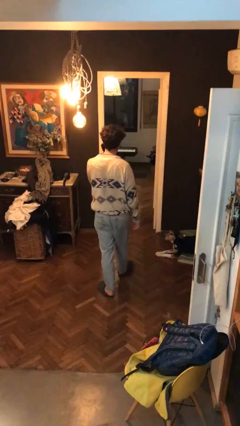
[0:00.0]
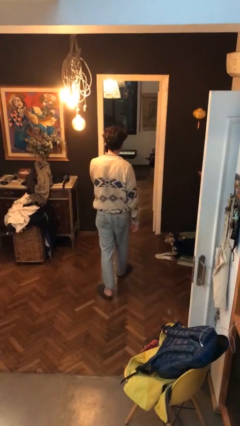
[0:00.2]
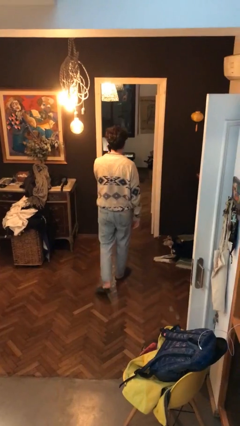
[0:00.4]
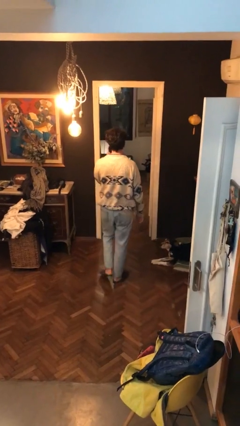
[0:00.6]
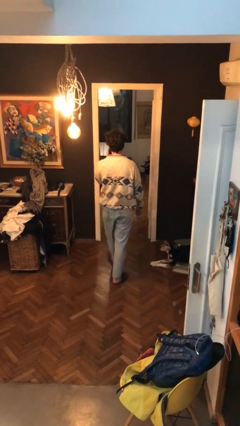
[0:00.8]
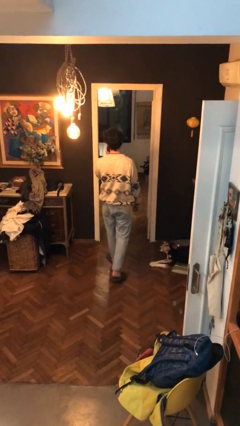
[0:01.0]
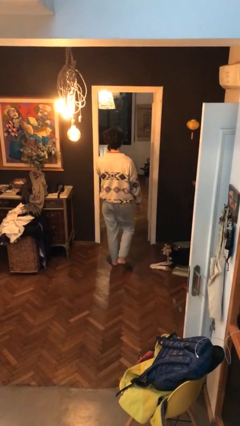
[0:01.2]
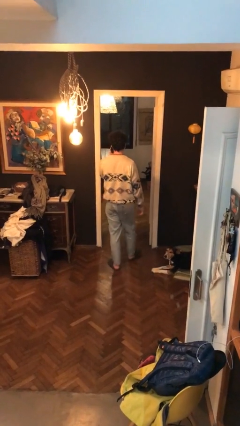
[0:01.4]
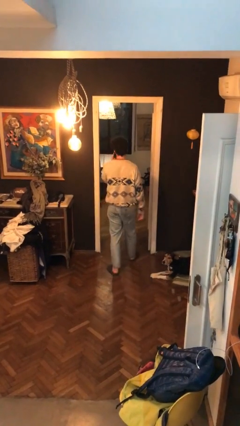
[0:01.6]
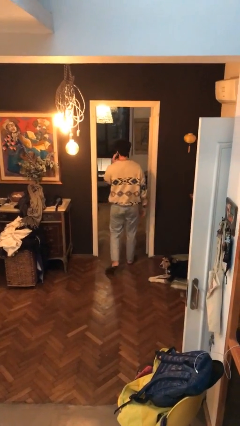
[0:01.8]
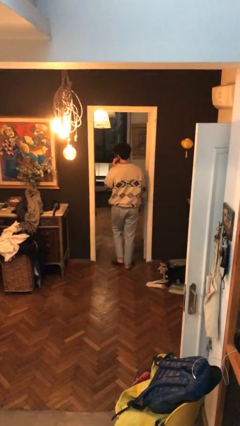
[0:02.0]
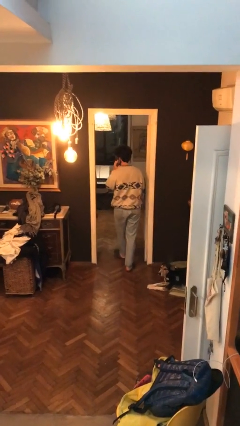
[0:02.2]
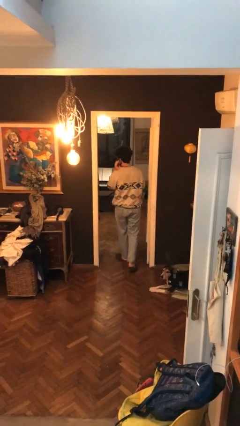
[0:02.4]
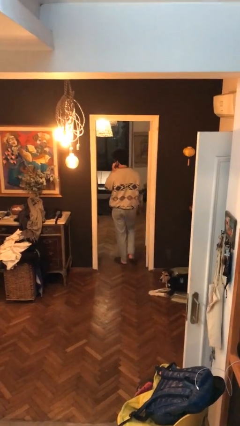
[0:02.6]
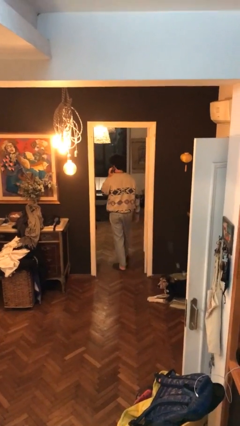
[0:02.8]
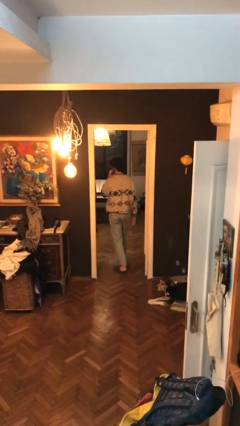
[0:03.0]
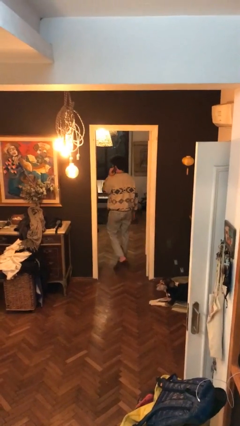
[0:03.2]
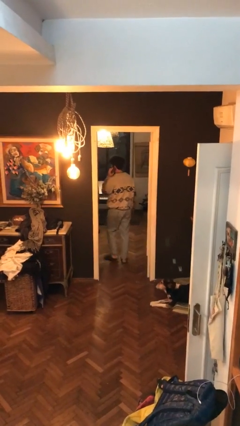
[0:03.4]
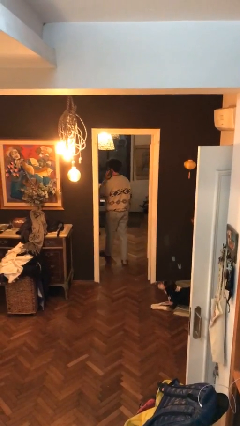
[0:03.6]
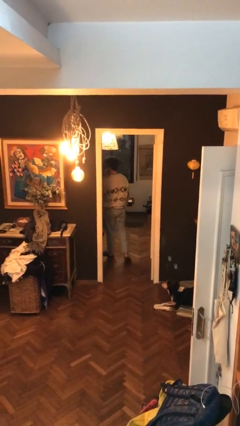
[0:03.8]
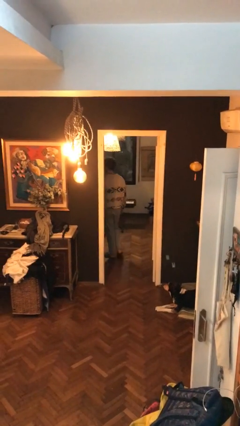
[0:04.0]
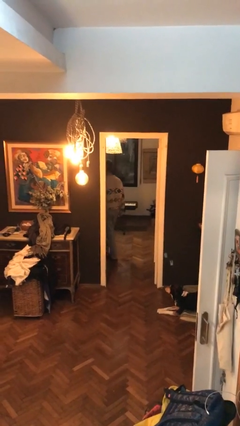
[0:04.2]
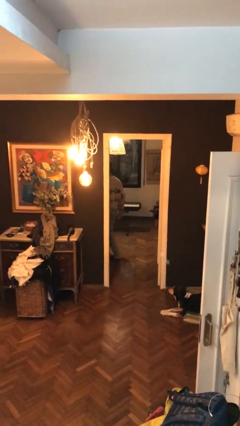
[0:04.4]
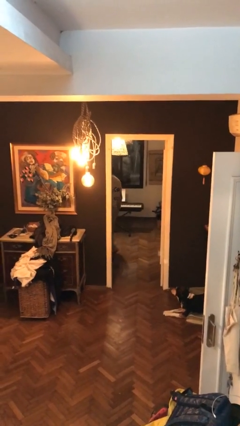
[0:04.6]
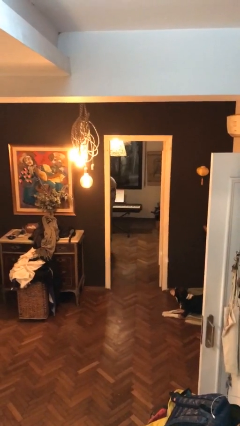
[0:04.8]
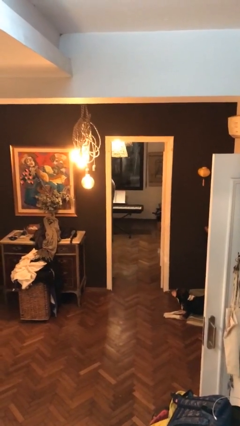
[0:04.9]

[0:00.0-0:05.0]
person exits scene through structure

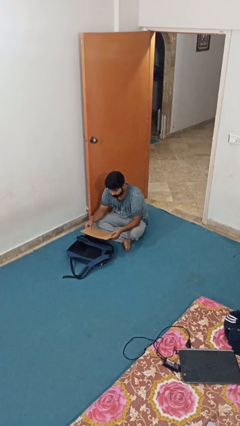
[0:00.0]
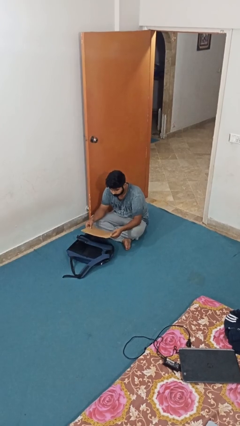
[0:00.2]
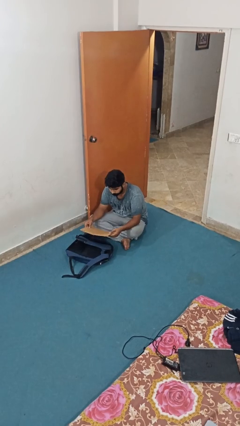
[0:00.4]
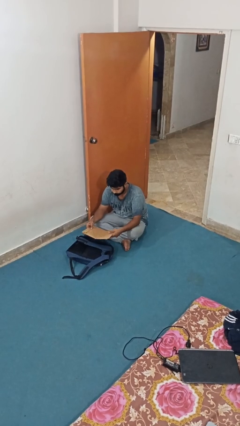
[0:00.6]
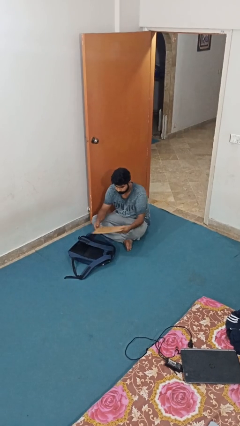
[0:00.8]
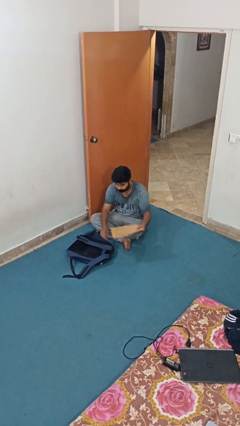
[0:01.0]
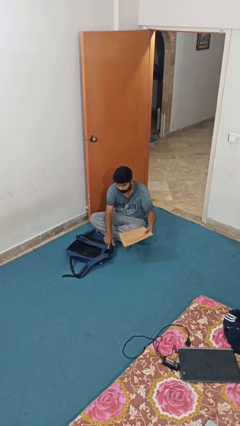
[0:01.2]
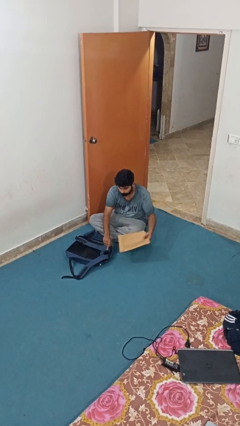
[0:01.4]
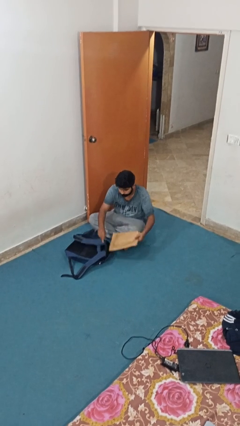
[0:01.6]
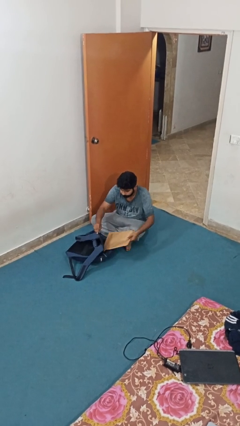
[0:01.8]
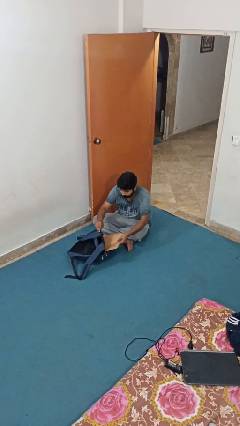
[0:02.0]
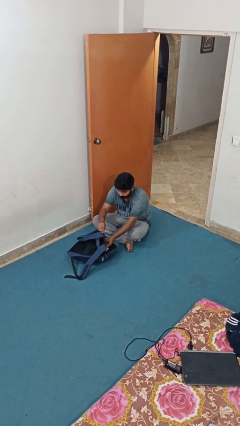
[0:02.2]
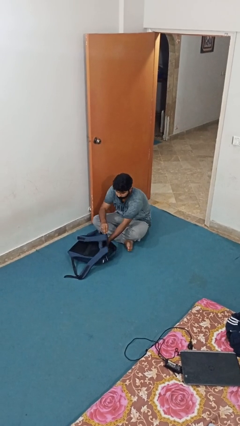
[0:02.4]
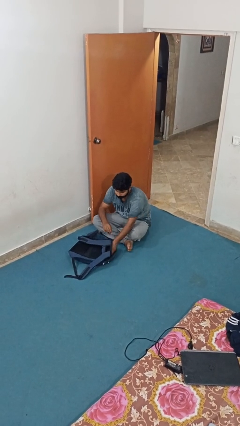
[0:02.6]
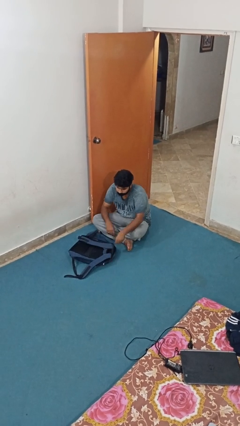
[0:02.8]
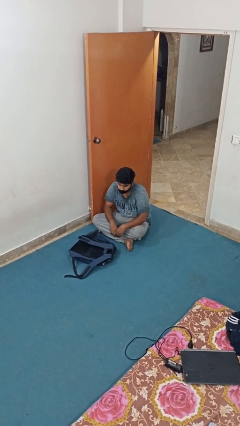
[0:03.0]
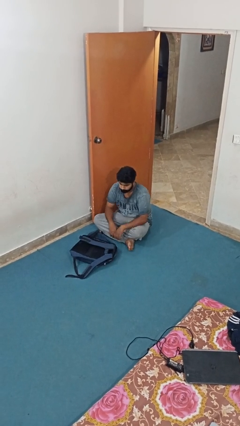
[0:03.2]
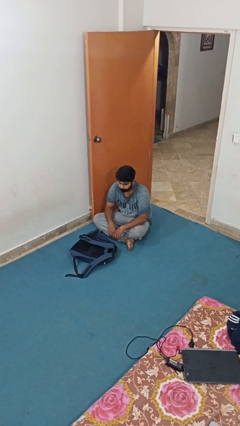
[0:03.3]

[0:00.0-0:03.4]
person puts object into backpack

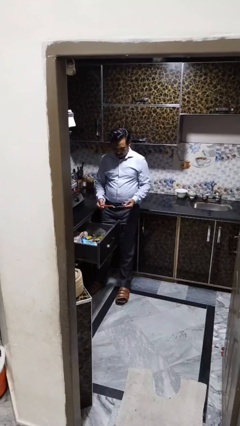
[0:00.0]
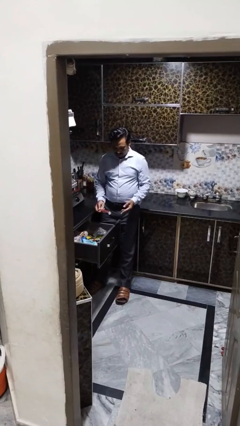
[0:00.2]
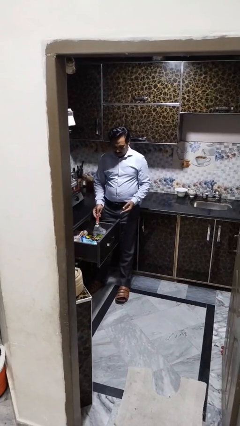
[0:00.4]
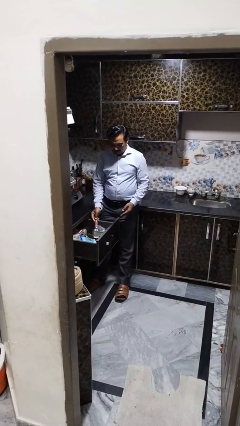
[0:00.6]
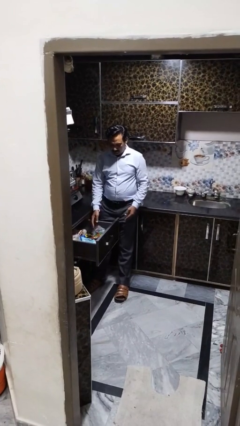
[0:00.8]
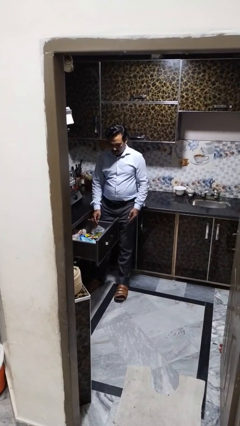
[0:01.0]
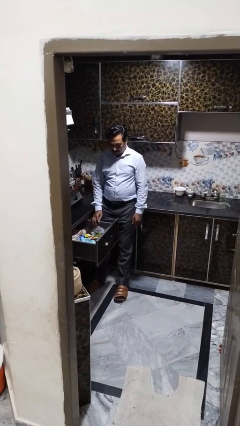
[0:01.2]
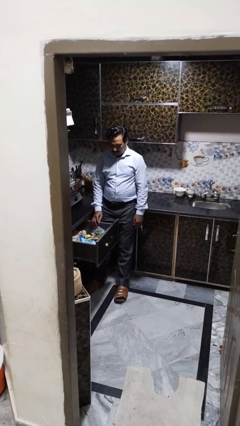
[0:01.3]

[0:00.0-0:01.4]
person puts object into kitchen drawer

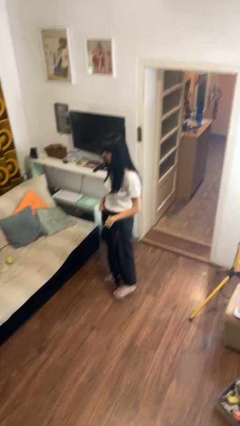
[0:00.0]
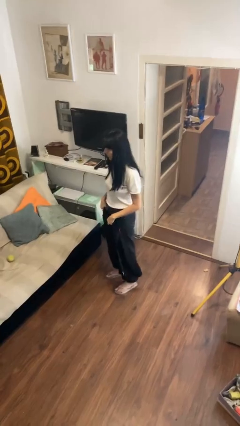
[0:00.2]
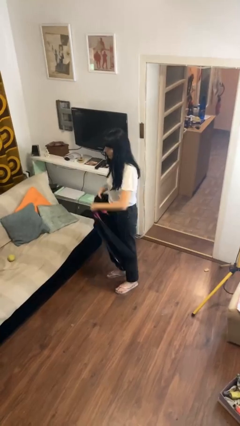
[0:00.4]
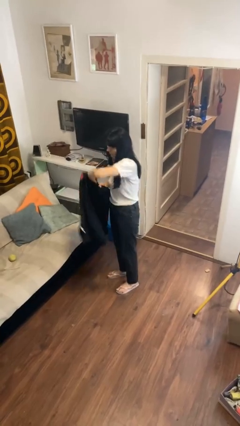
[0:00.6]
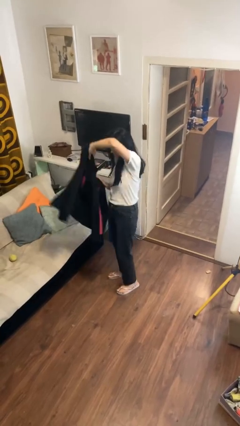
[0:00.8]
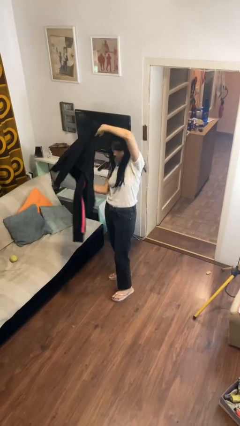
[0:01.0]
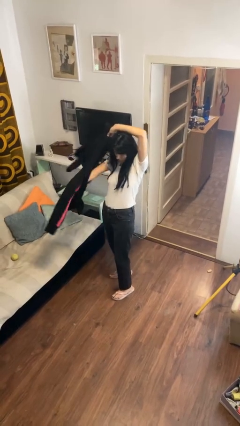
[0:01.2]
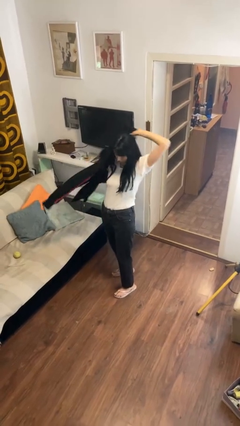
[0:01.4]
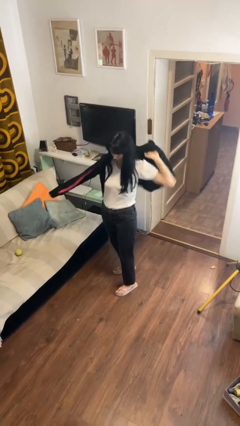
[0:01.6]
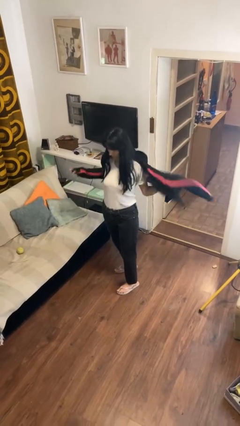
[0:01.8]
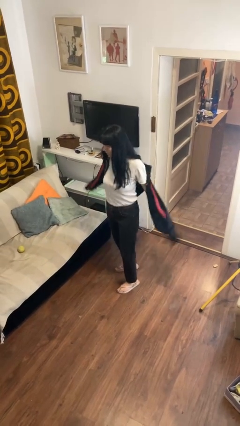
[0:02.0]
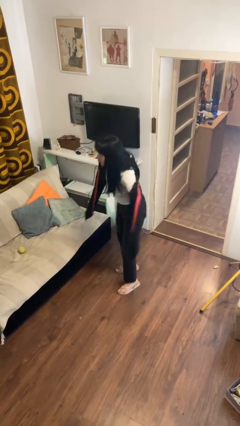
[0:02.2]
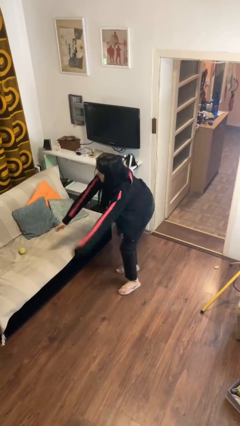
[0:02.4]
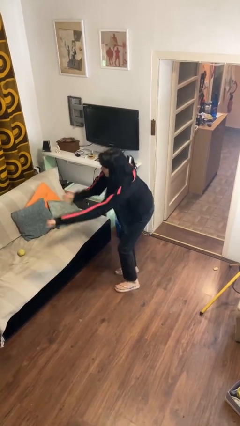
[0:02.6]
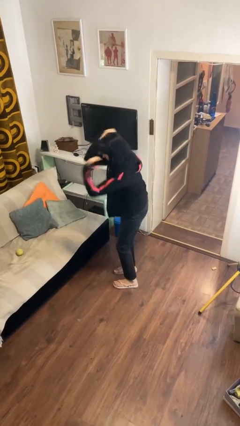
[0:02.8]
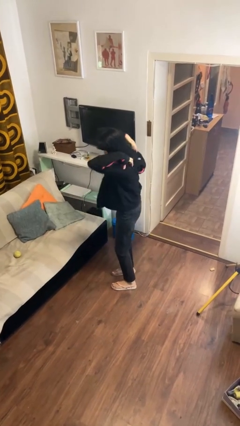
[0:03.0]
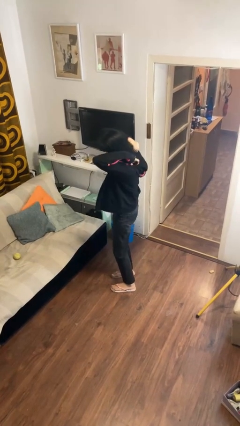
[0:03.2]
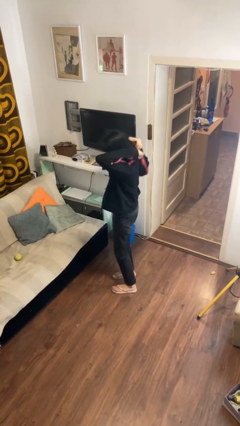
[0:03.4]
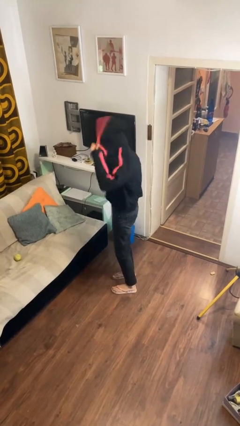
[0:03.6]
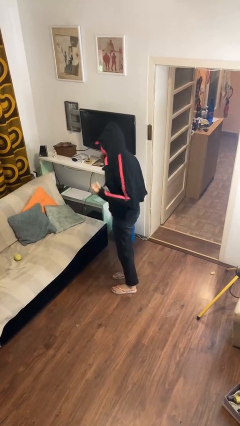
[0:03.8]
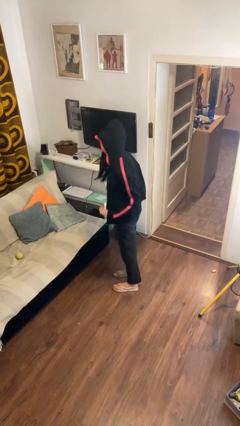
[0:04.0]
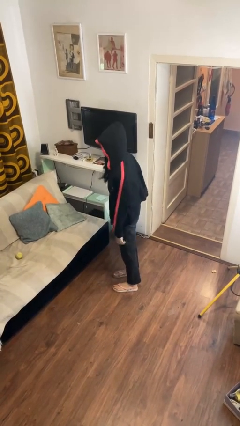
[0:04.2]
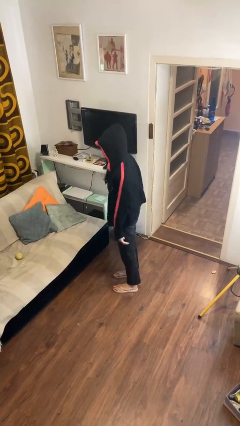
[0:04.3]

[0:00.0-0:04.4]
person puts on hoodie

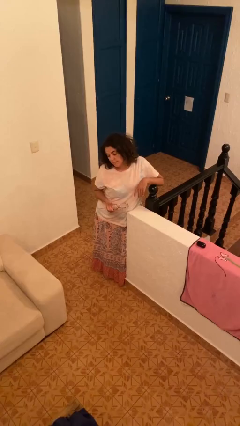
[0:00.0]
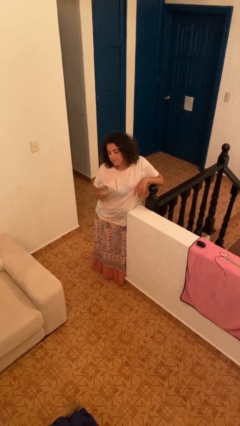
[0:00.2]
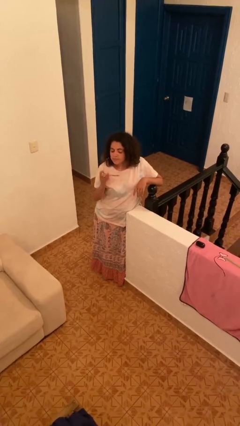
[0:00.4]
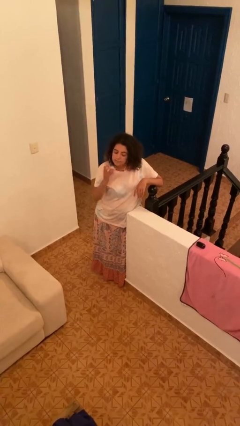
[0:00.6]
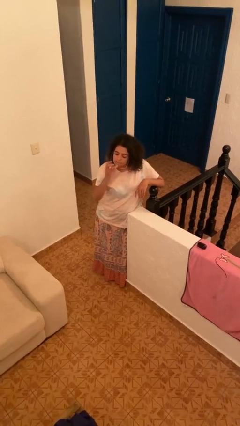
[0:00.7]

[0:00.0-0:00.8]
person puts on glasses

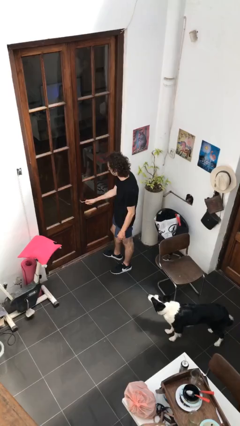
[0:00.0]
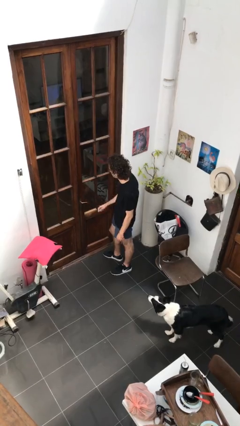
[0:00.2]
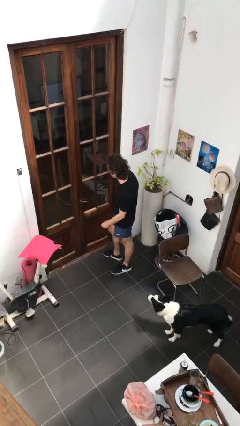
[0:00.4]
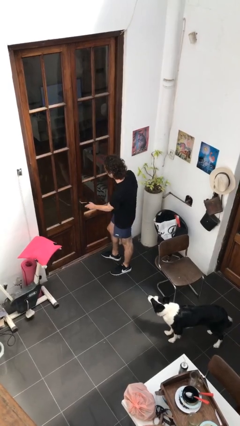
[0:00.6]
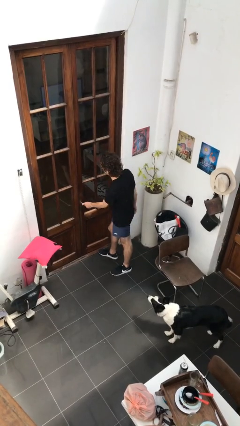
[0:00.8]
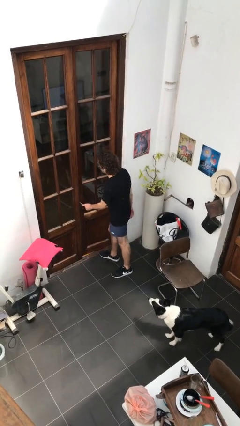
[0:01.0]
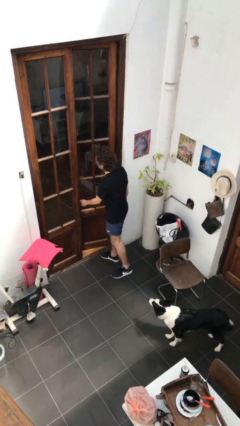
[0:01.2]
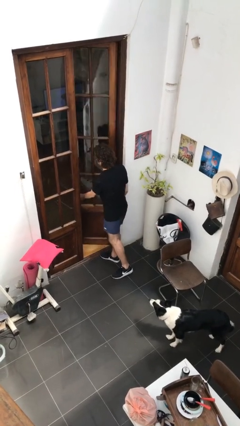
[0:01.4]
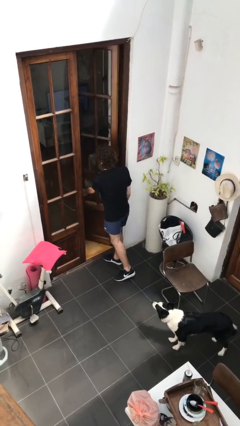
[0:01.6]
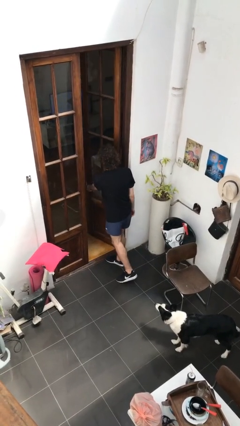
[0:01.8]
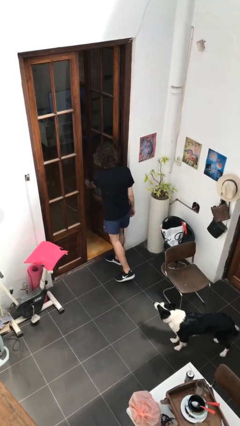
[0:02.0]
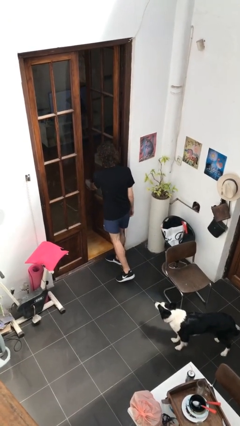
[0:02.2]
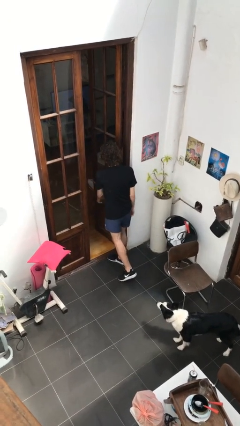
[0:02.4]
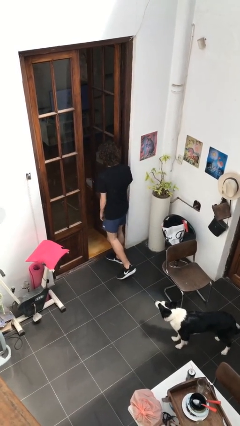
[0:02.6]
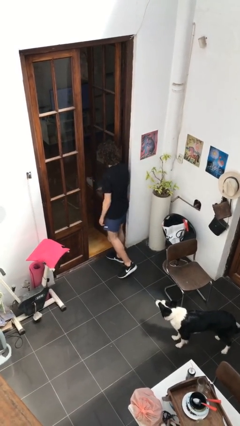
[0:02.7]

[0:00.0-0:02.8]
person opens facility door
